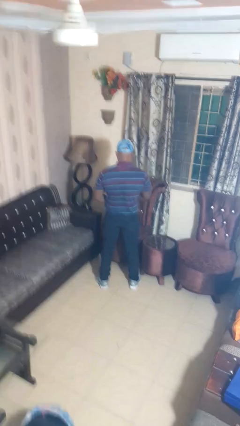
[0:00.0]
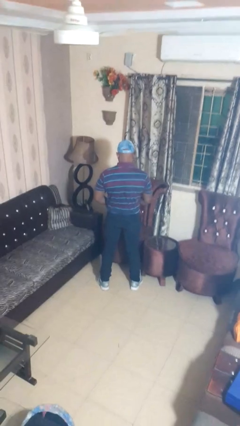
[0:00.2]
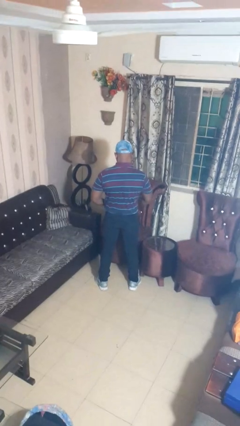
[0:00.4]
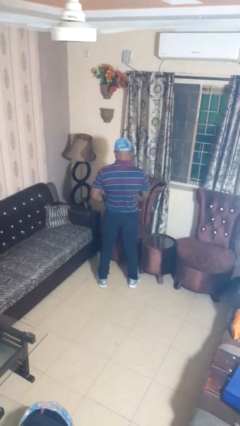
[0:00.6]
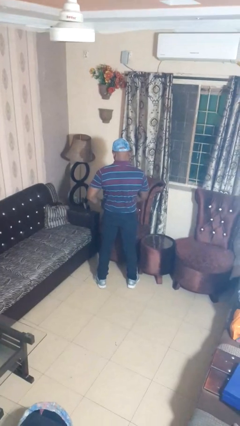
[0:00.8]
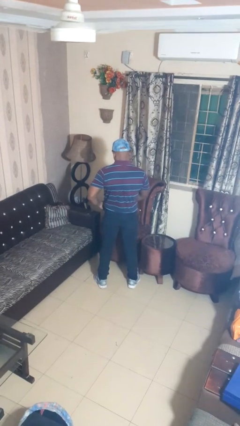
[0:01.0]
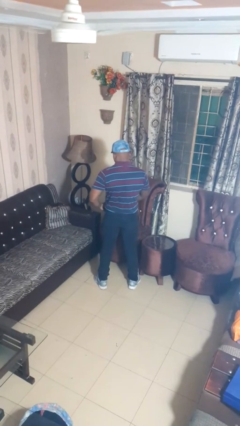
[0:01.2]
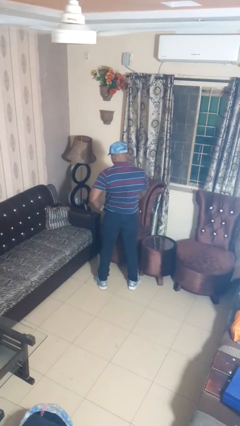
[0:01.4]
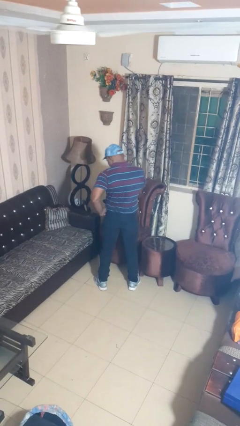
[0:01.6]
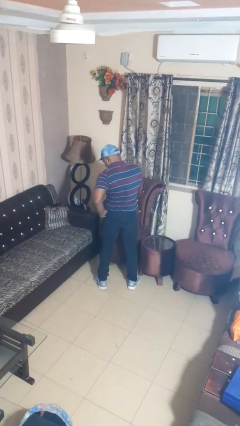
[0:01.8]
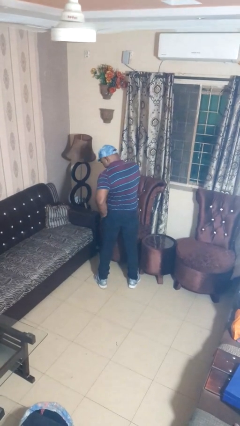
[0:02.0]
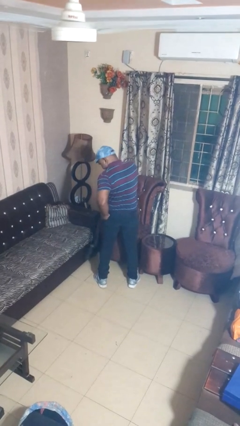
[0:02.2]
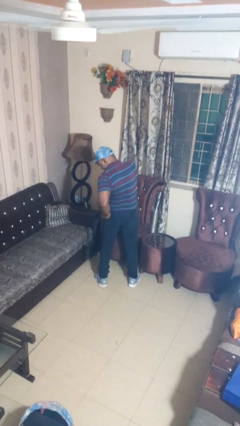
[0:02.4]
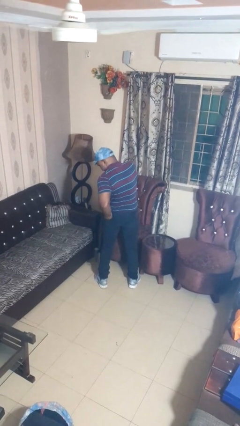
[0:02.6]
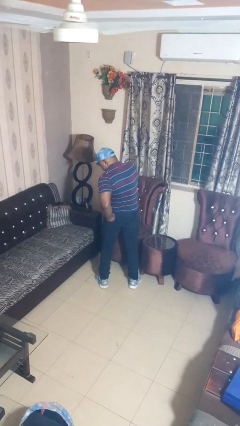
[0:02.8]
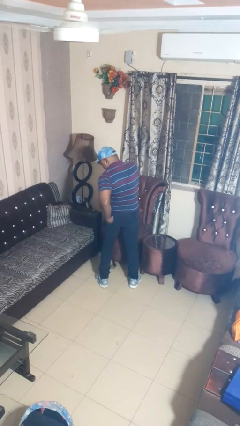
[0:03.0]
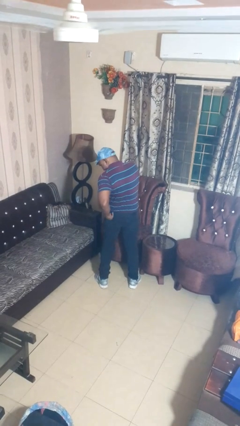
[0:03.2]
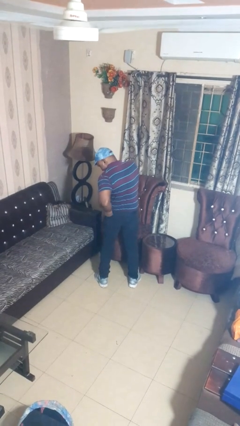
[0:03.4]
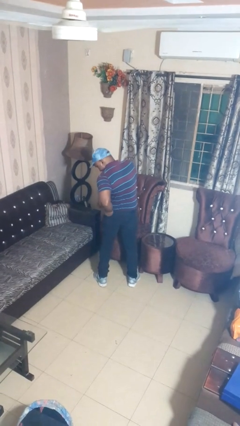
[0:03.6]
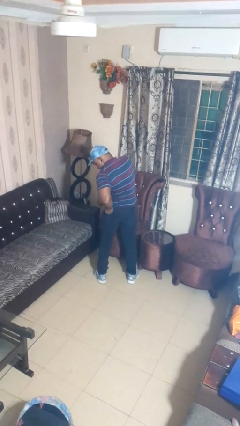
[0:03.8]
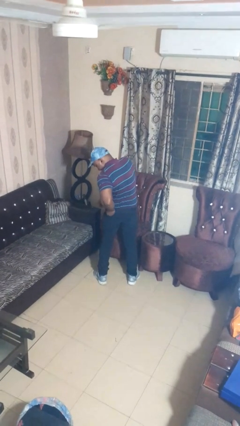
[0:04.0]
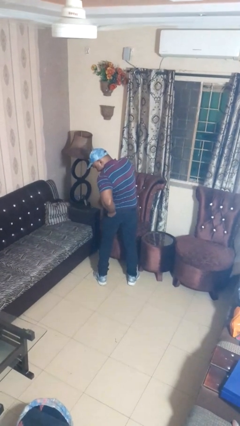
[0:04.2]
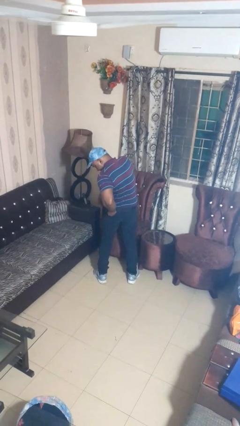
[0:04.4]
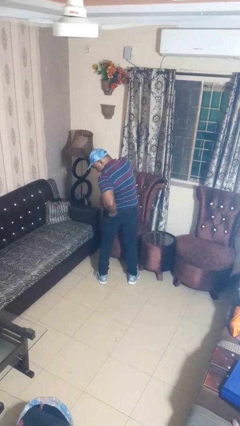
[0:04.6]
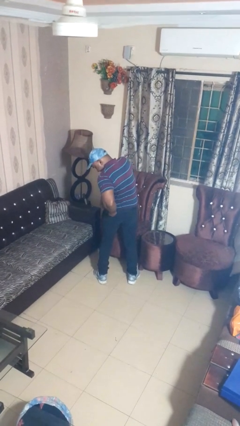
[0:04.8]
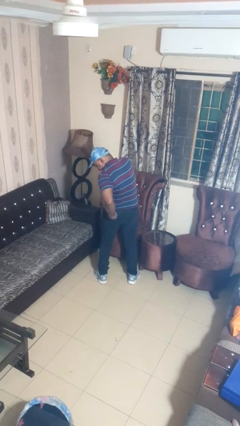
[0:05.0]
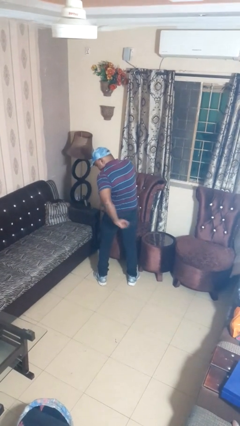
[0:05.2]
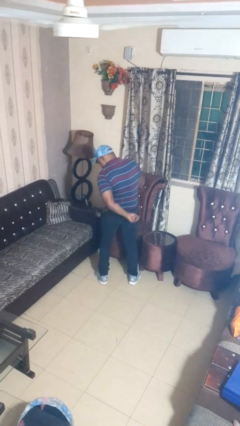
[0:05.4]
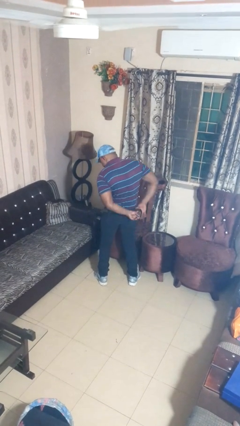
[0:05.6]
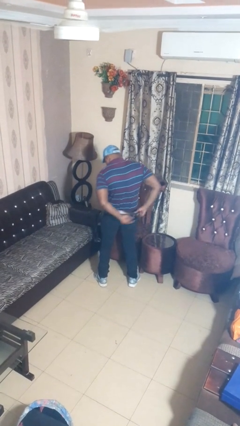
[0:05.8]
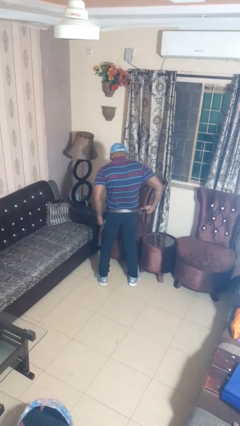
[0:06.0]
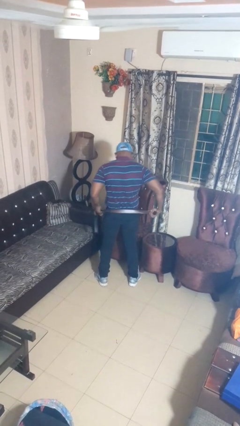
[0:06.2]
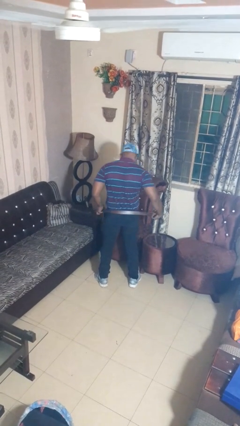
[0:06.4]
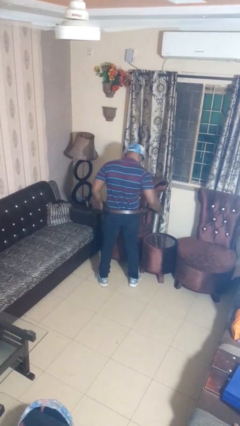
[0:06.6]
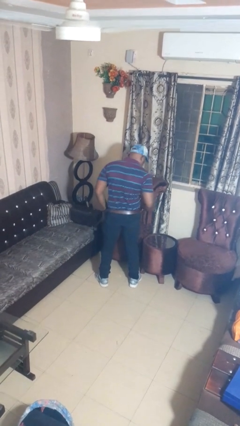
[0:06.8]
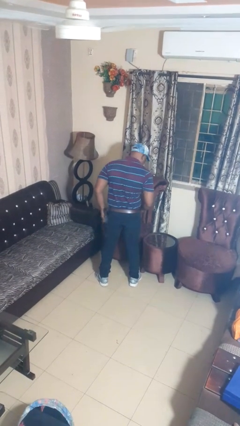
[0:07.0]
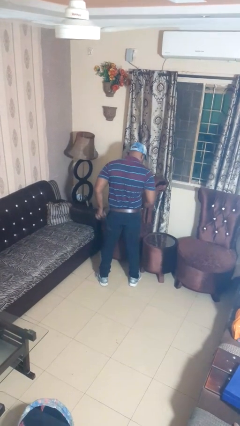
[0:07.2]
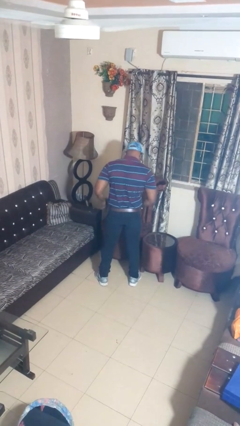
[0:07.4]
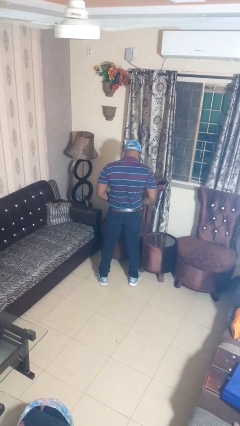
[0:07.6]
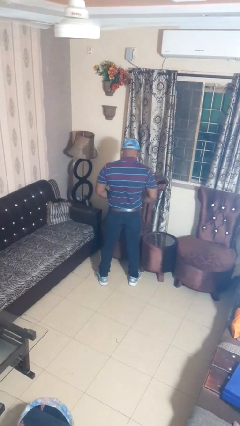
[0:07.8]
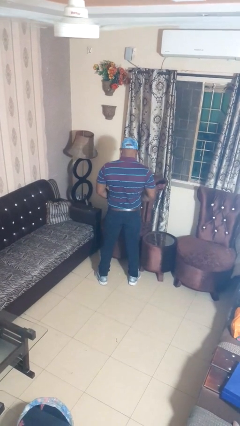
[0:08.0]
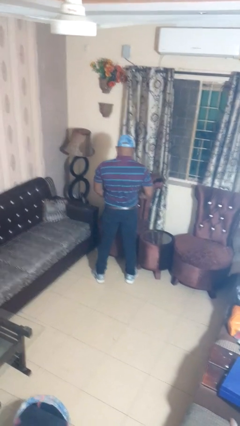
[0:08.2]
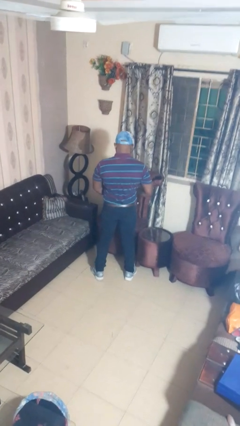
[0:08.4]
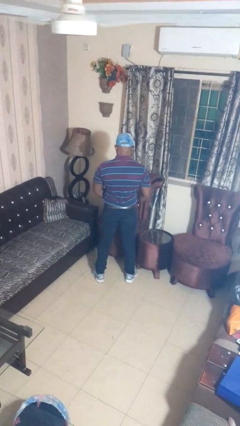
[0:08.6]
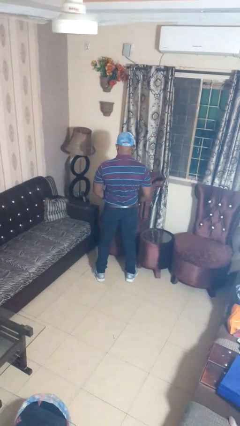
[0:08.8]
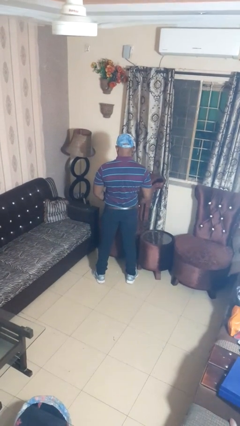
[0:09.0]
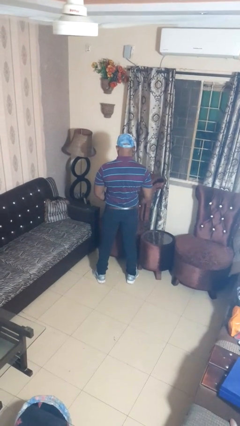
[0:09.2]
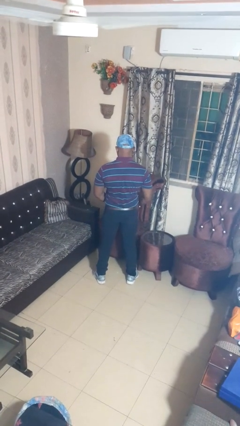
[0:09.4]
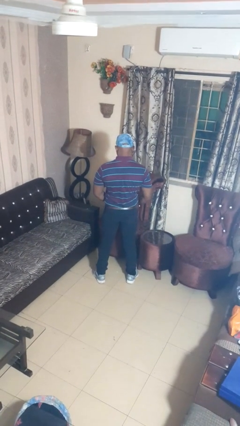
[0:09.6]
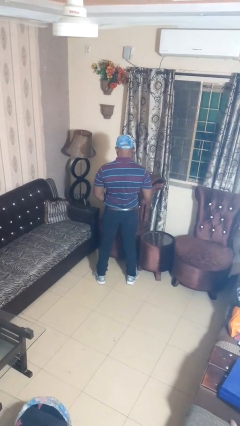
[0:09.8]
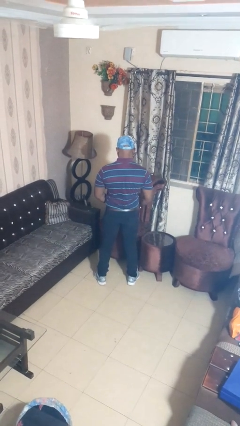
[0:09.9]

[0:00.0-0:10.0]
person puts on belt

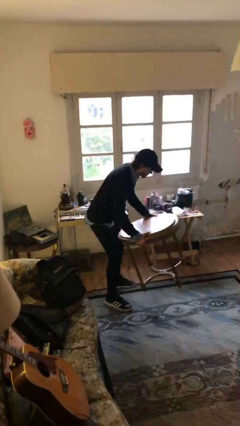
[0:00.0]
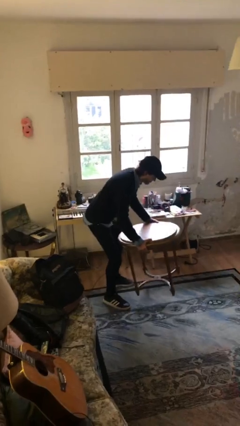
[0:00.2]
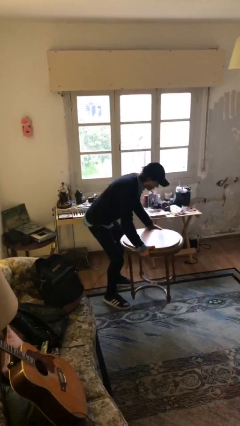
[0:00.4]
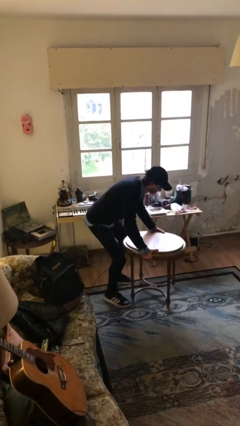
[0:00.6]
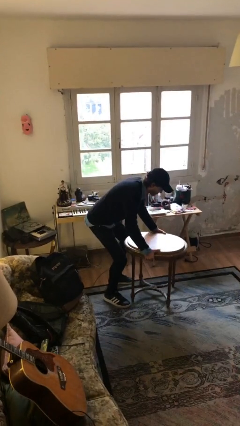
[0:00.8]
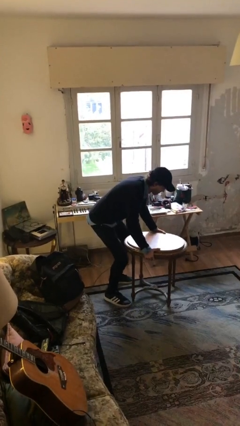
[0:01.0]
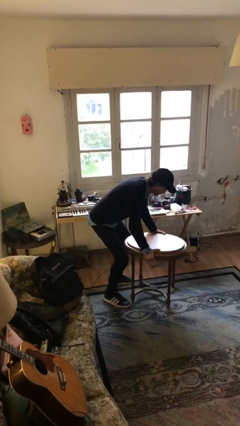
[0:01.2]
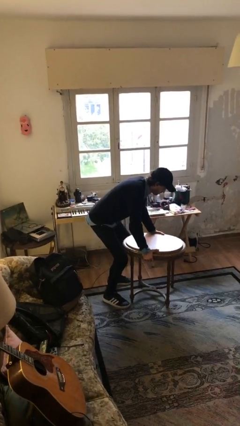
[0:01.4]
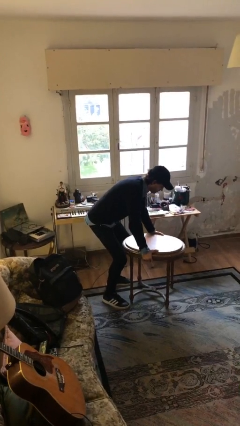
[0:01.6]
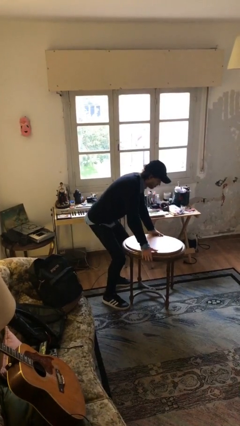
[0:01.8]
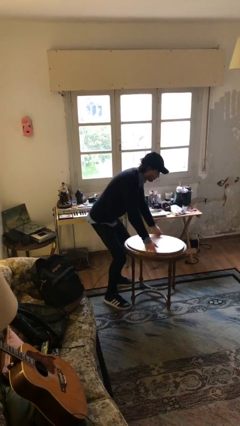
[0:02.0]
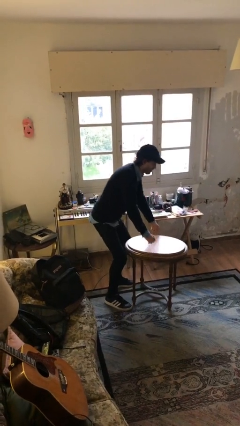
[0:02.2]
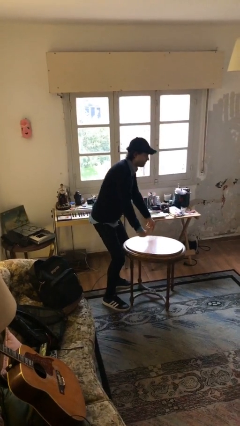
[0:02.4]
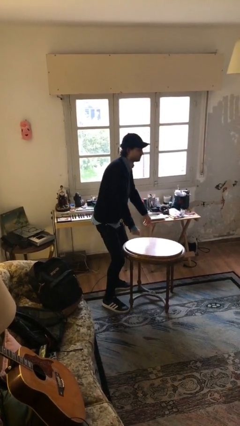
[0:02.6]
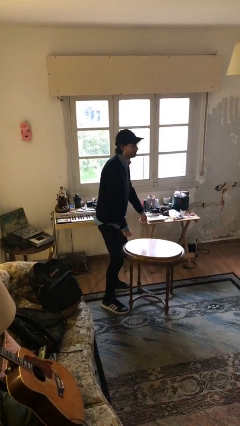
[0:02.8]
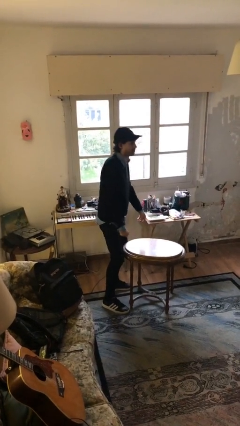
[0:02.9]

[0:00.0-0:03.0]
person puts down object on floor

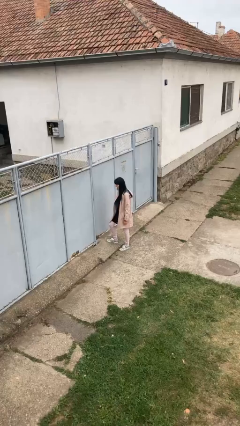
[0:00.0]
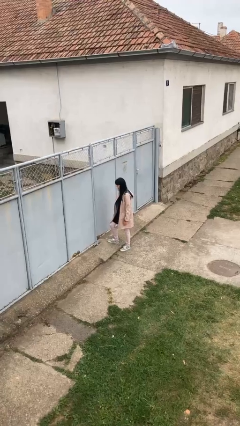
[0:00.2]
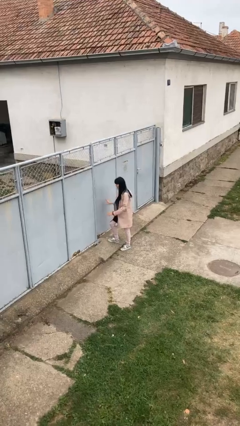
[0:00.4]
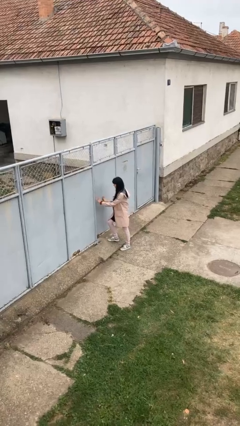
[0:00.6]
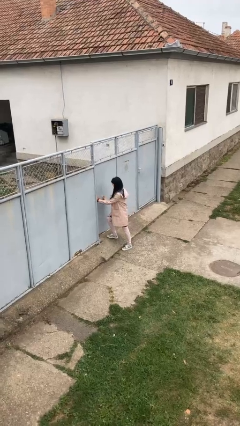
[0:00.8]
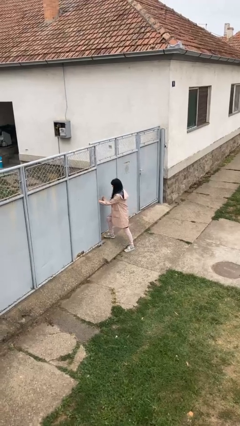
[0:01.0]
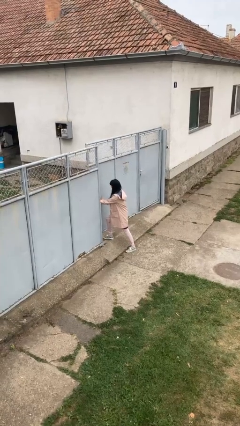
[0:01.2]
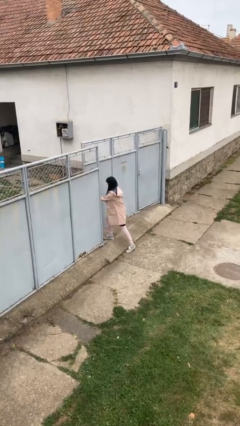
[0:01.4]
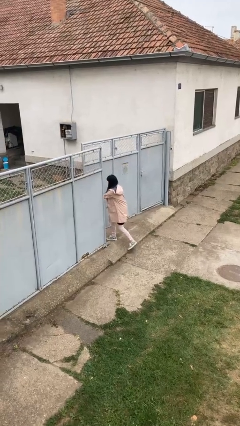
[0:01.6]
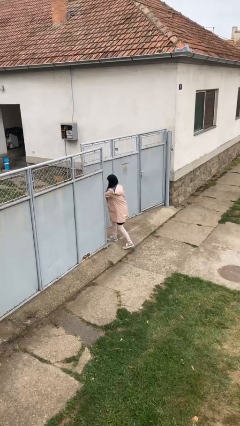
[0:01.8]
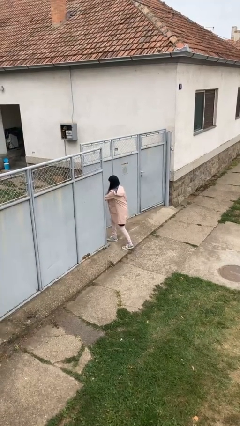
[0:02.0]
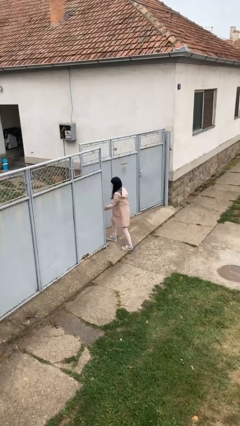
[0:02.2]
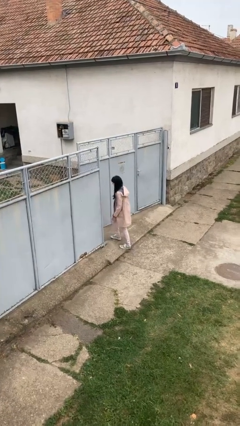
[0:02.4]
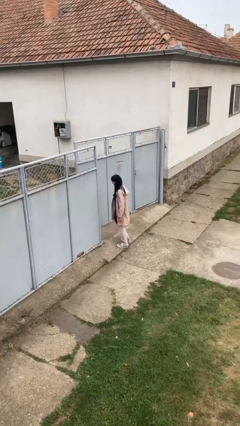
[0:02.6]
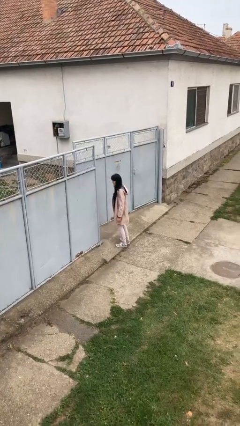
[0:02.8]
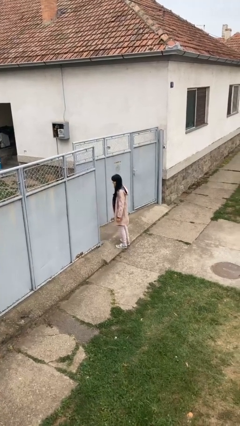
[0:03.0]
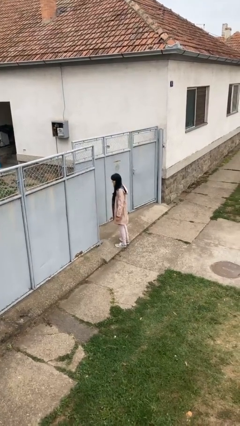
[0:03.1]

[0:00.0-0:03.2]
person opens gate

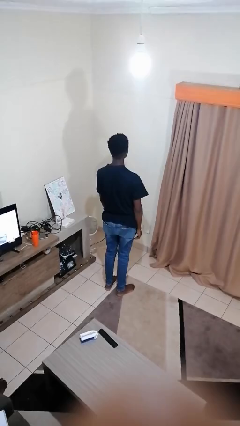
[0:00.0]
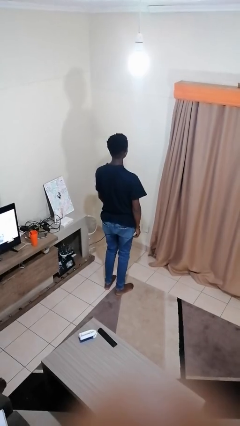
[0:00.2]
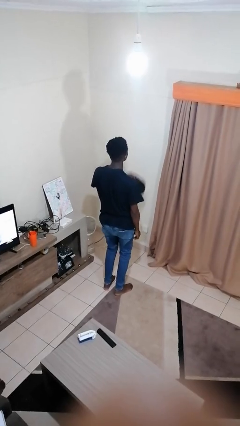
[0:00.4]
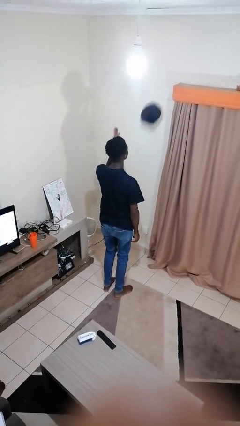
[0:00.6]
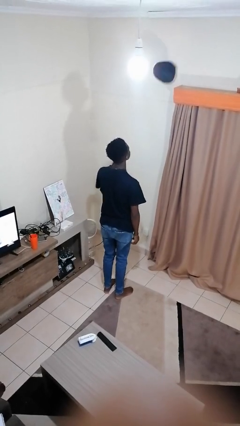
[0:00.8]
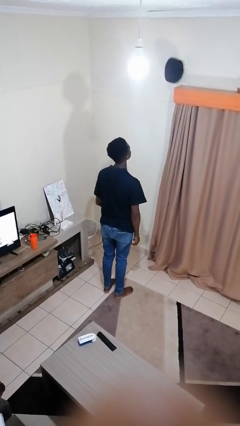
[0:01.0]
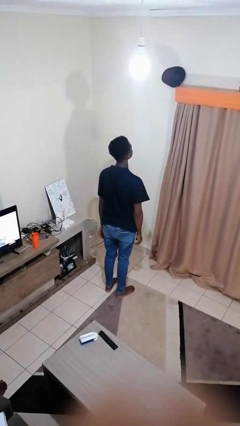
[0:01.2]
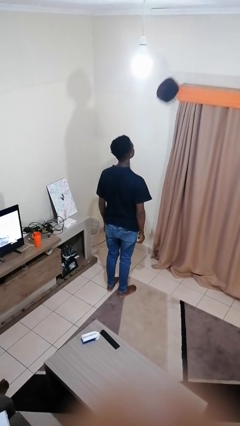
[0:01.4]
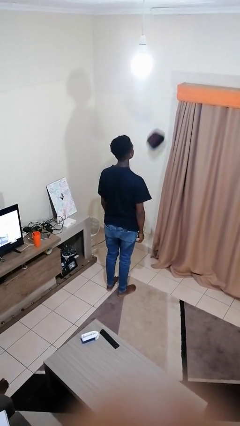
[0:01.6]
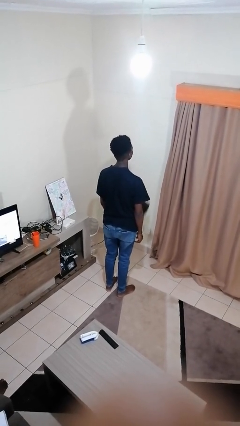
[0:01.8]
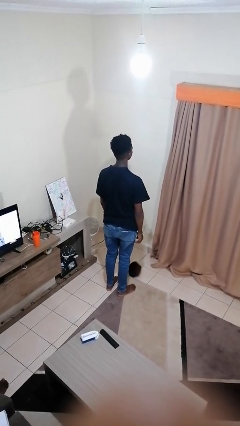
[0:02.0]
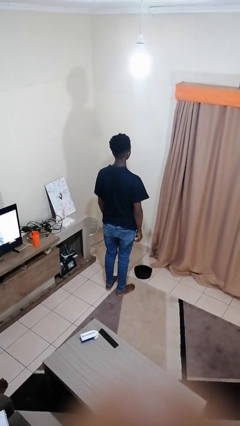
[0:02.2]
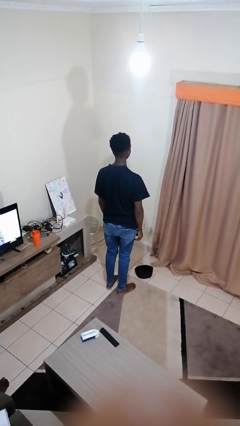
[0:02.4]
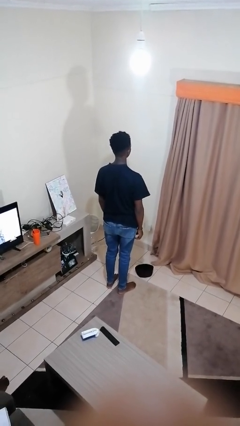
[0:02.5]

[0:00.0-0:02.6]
person throws object into air
